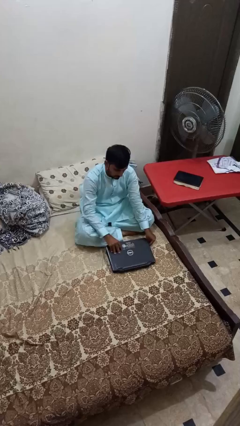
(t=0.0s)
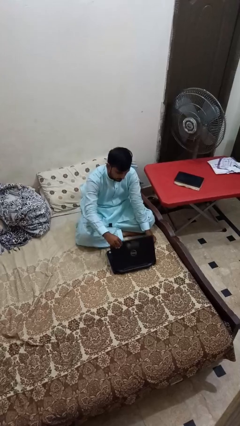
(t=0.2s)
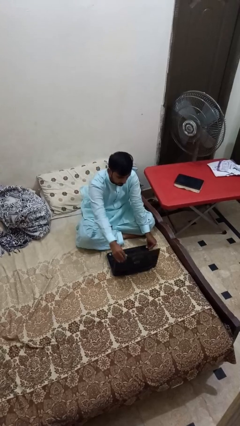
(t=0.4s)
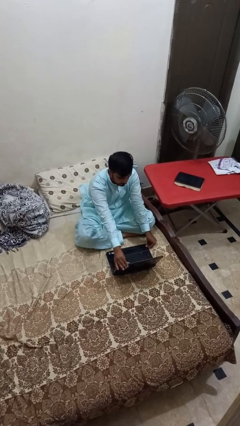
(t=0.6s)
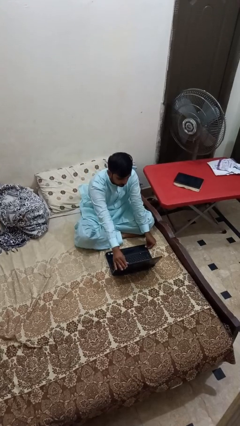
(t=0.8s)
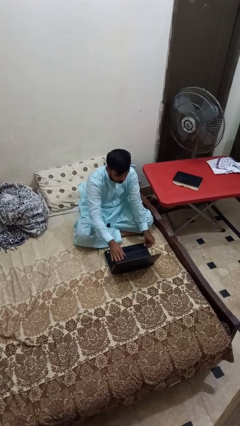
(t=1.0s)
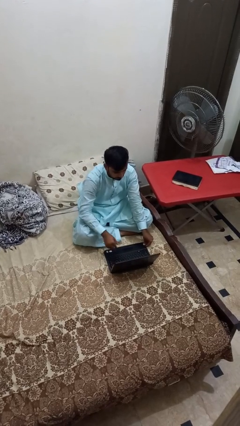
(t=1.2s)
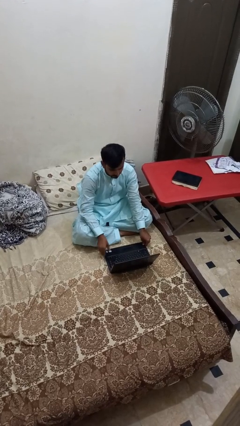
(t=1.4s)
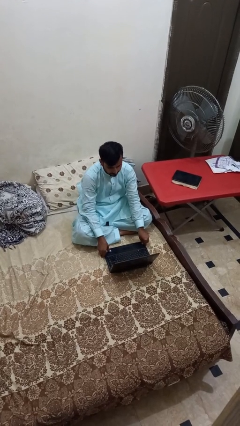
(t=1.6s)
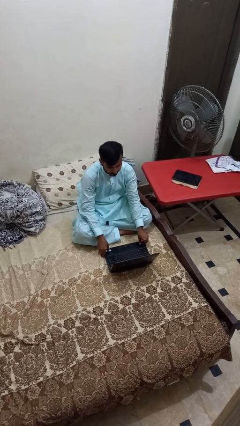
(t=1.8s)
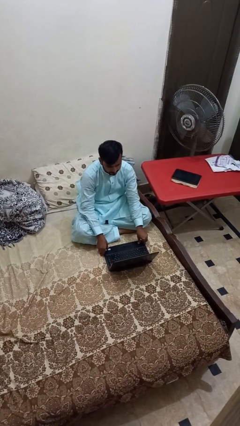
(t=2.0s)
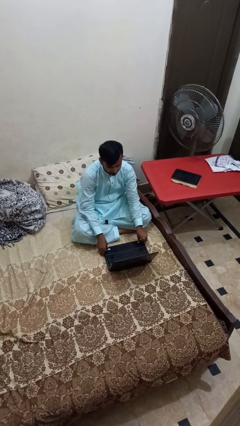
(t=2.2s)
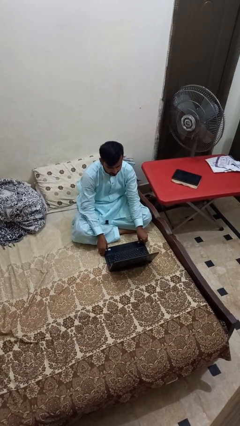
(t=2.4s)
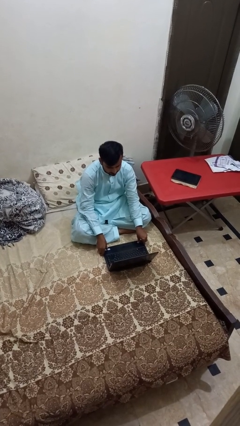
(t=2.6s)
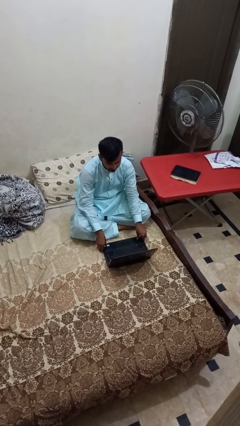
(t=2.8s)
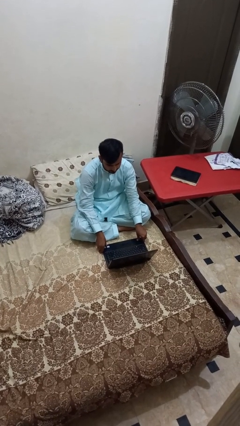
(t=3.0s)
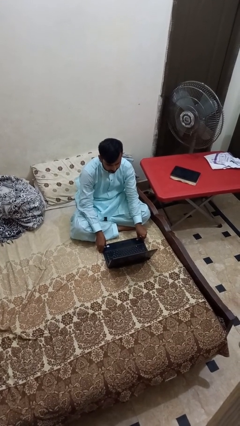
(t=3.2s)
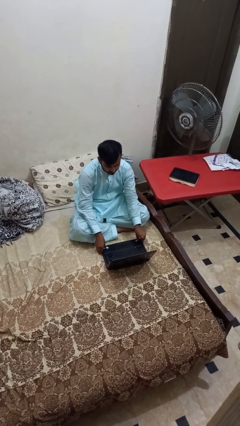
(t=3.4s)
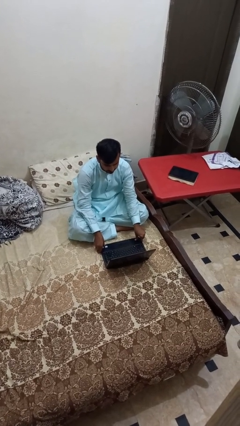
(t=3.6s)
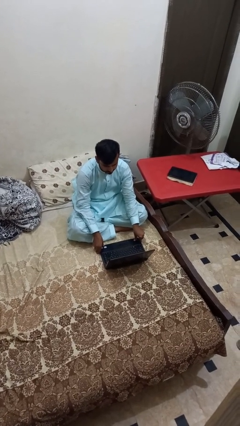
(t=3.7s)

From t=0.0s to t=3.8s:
person opens laptop

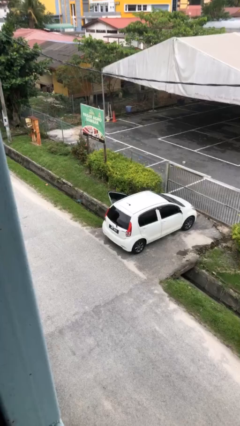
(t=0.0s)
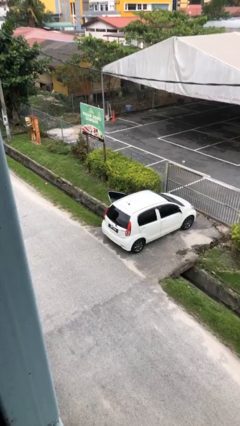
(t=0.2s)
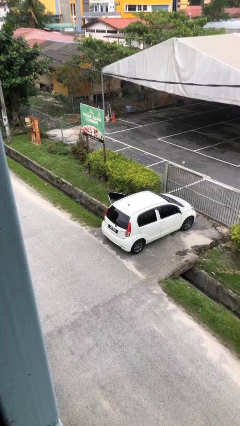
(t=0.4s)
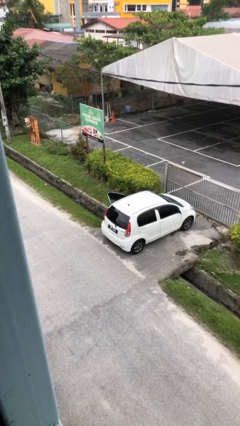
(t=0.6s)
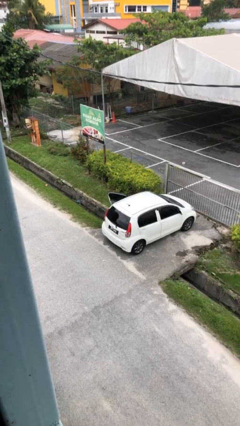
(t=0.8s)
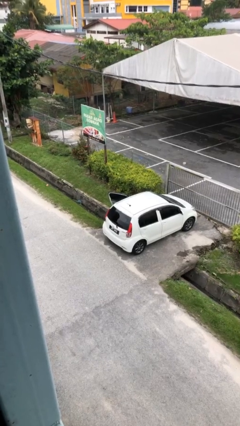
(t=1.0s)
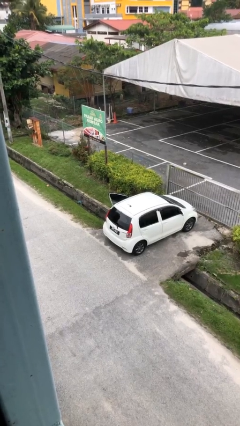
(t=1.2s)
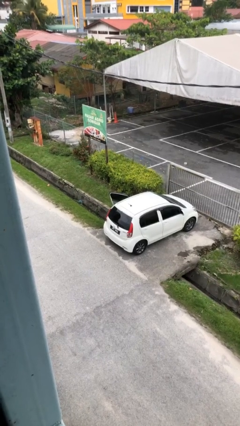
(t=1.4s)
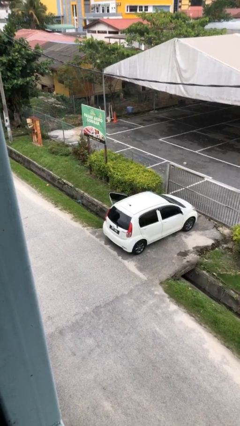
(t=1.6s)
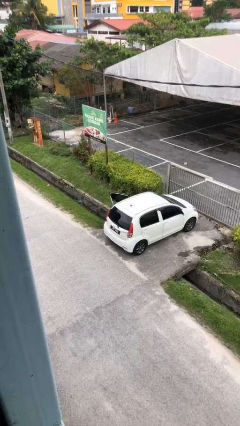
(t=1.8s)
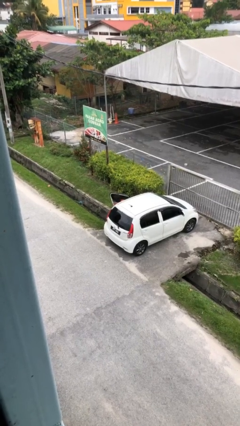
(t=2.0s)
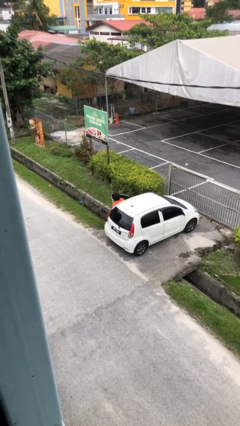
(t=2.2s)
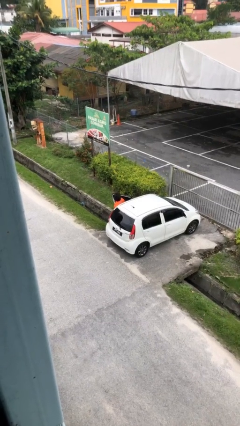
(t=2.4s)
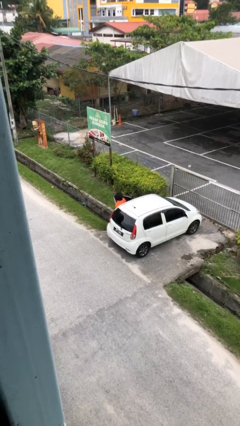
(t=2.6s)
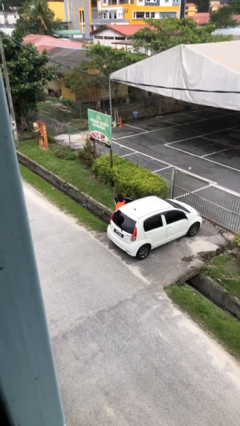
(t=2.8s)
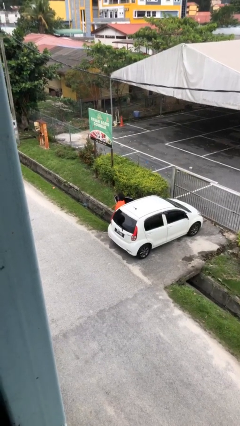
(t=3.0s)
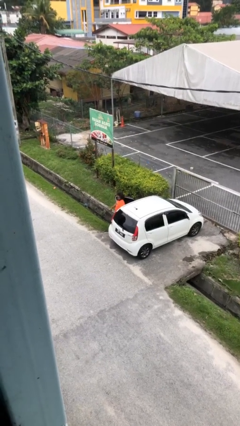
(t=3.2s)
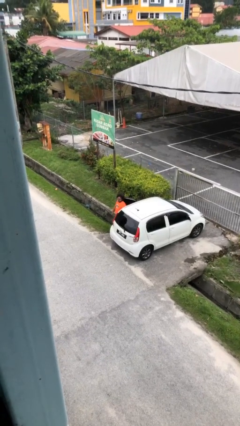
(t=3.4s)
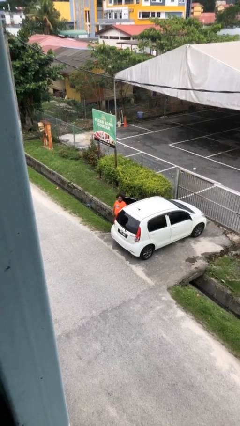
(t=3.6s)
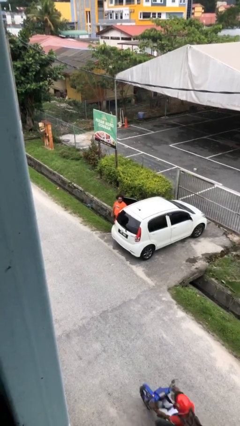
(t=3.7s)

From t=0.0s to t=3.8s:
person exits car

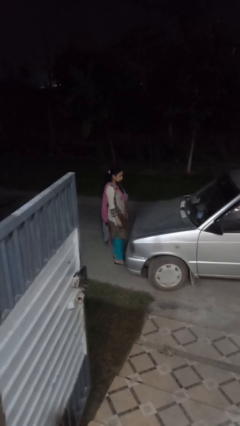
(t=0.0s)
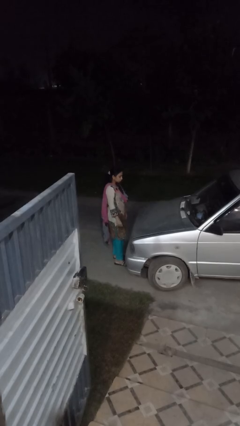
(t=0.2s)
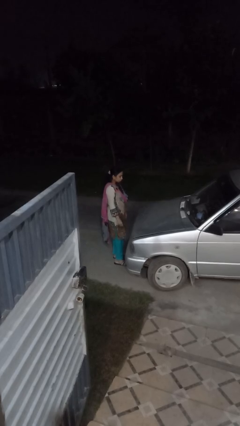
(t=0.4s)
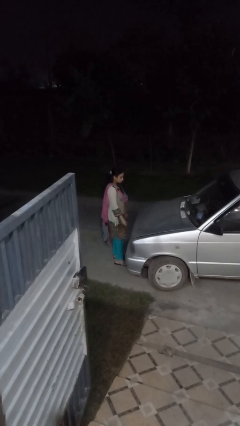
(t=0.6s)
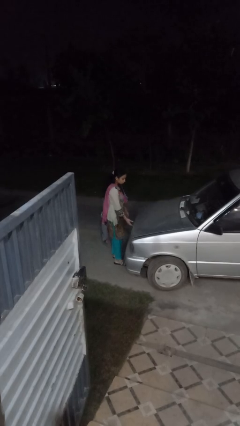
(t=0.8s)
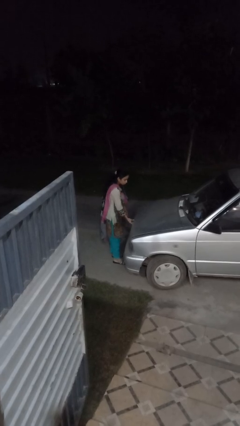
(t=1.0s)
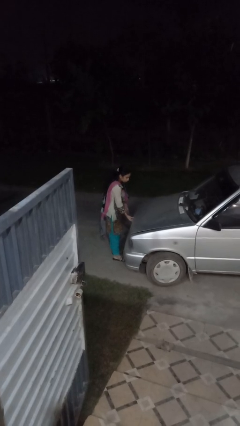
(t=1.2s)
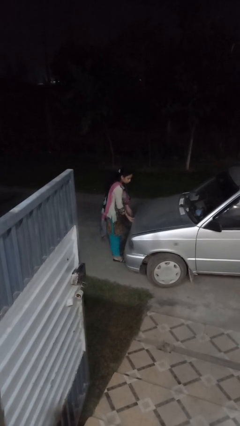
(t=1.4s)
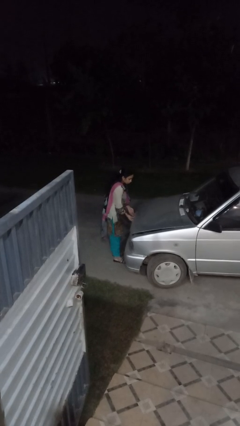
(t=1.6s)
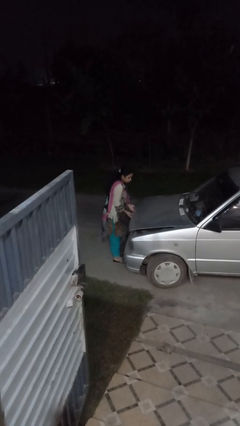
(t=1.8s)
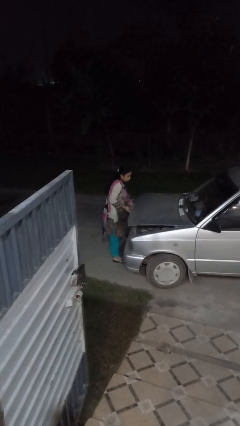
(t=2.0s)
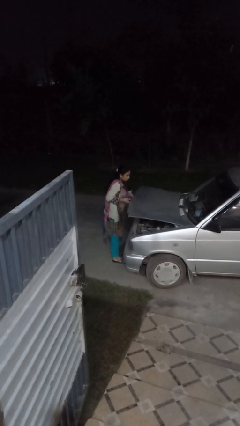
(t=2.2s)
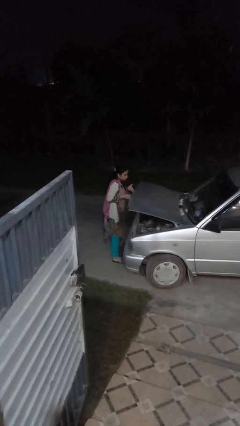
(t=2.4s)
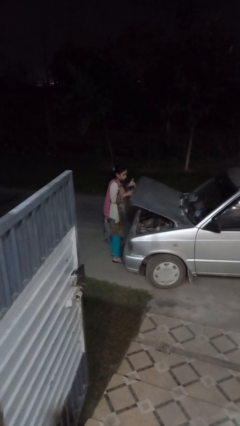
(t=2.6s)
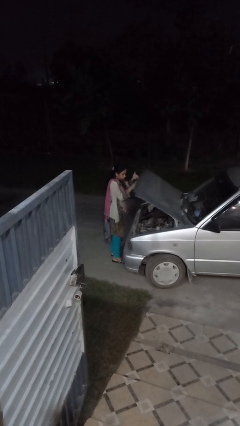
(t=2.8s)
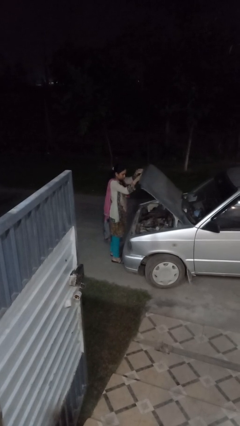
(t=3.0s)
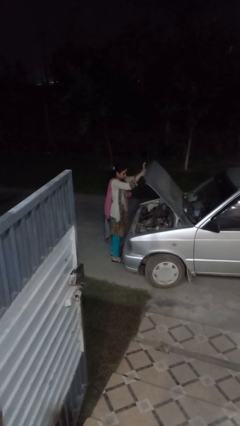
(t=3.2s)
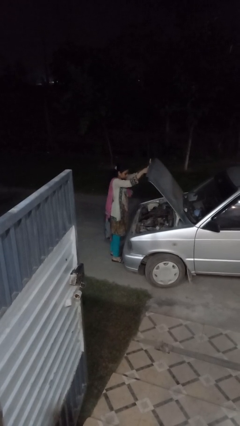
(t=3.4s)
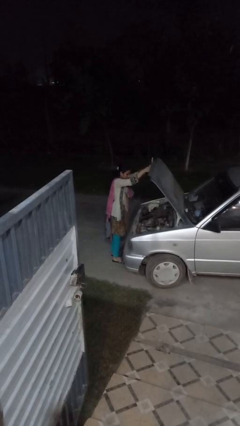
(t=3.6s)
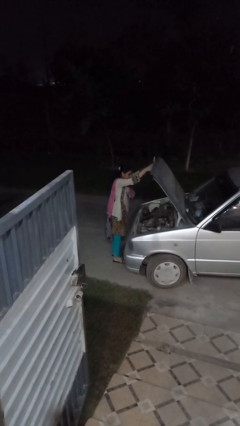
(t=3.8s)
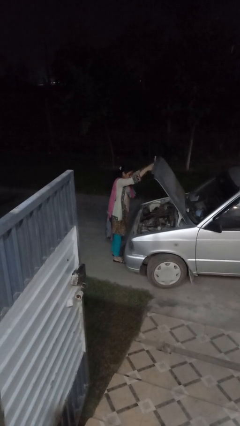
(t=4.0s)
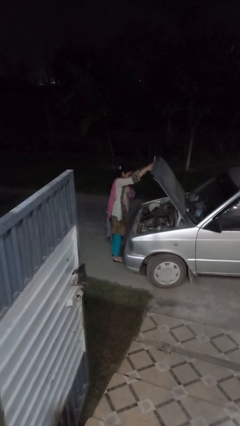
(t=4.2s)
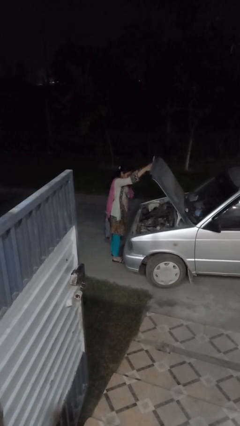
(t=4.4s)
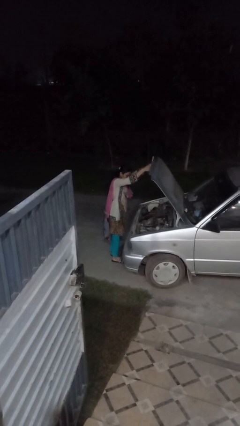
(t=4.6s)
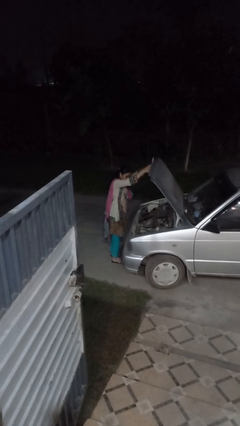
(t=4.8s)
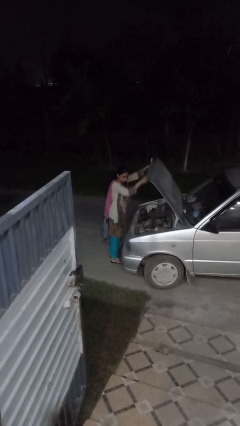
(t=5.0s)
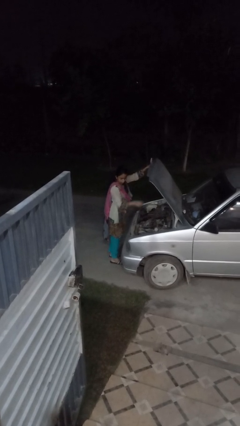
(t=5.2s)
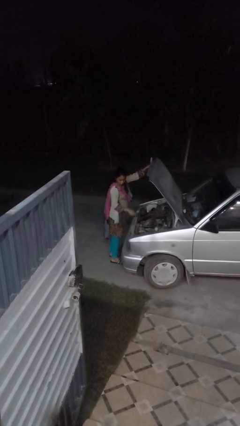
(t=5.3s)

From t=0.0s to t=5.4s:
person opens car hood

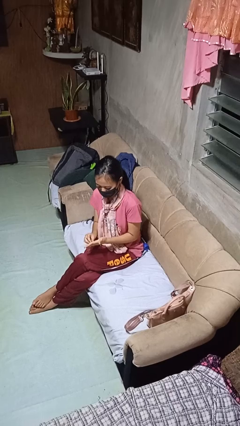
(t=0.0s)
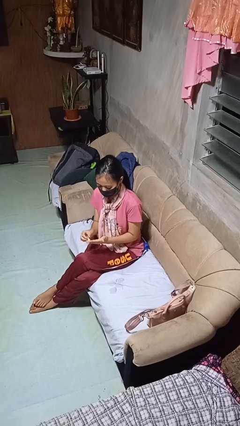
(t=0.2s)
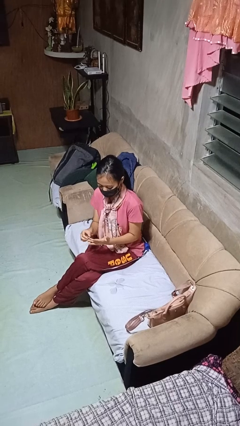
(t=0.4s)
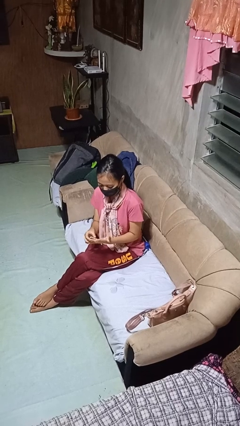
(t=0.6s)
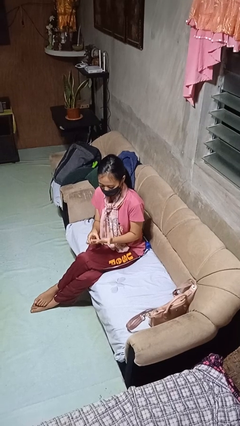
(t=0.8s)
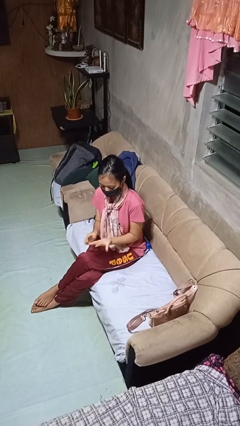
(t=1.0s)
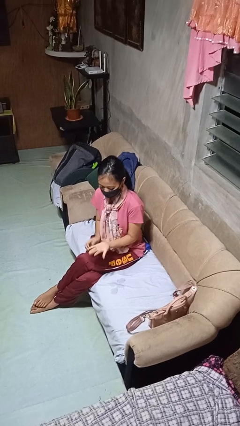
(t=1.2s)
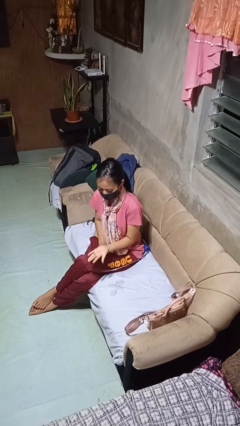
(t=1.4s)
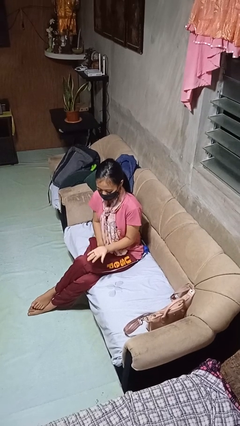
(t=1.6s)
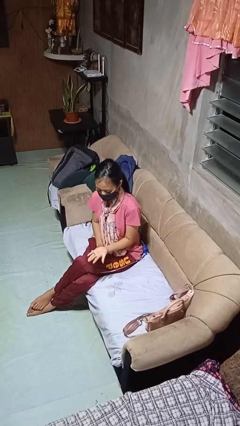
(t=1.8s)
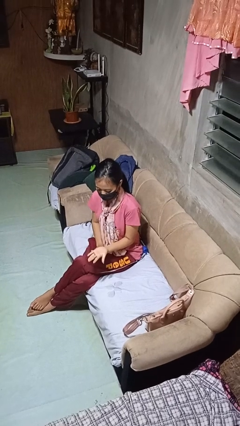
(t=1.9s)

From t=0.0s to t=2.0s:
person puts on ring

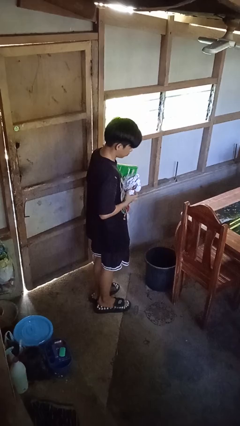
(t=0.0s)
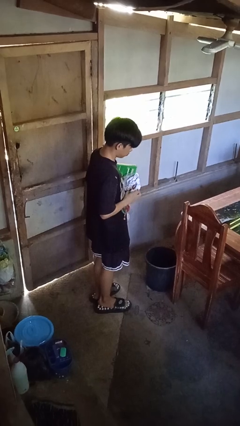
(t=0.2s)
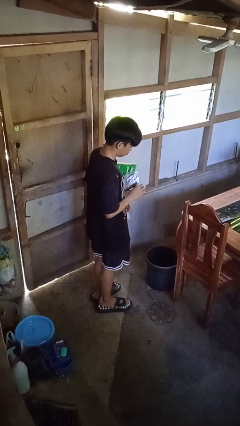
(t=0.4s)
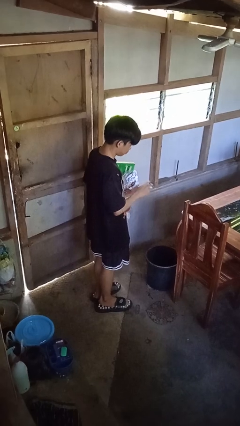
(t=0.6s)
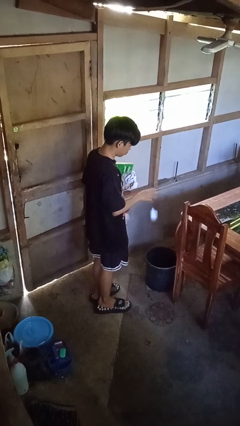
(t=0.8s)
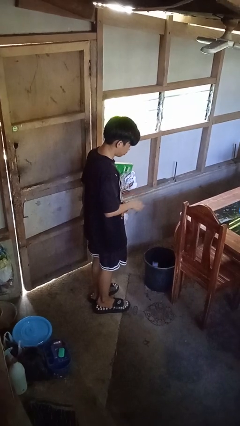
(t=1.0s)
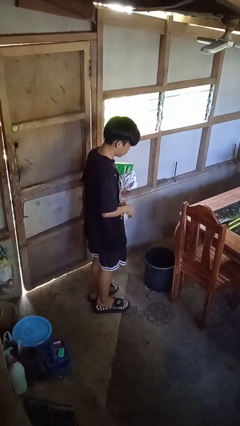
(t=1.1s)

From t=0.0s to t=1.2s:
person discards trash

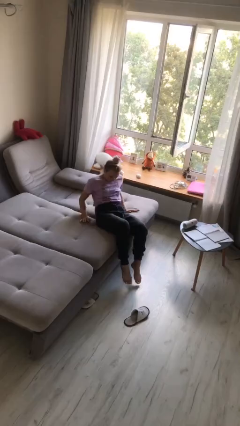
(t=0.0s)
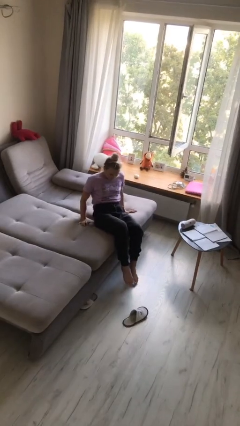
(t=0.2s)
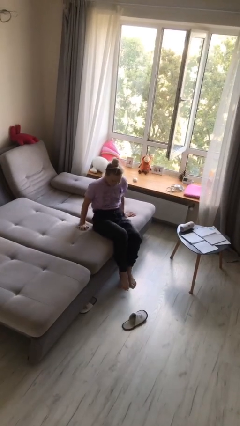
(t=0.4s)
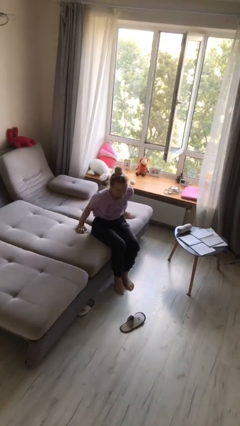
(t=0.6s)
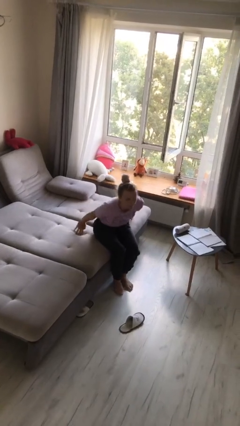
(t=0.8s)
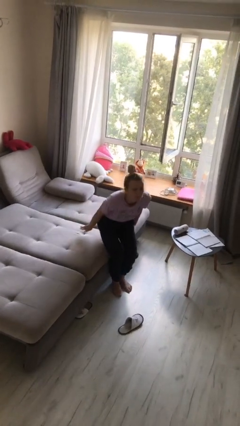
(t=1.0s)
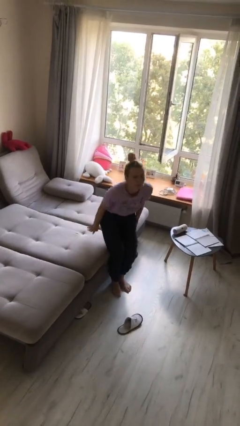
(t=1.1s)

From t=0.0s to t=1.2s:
person stands up
